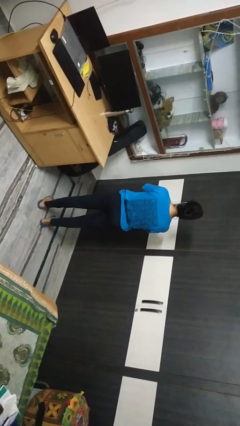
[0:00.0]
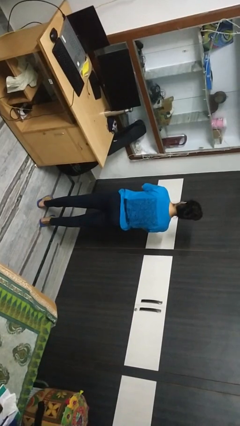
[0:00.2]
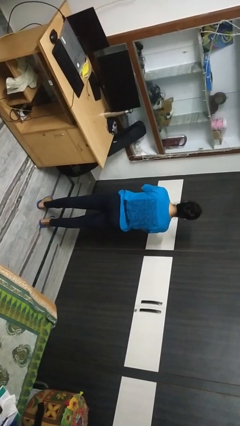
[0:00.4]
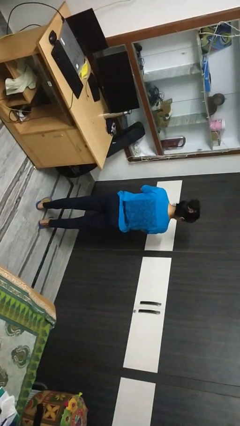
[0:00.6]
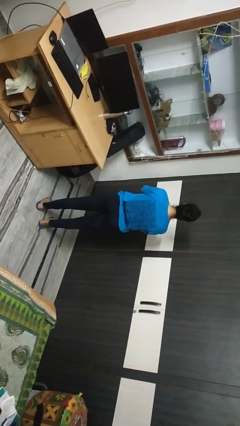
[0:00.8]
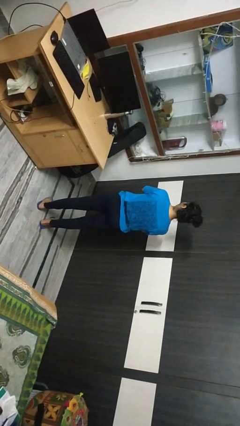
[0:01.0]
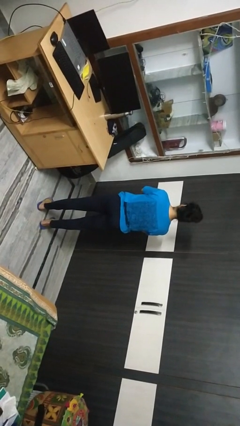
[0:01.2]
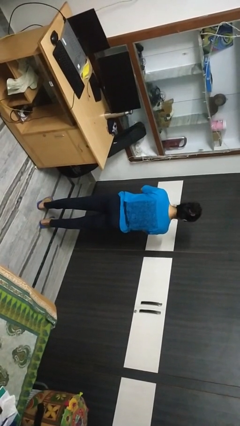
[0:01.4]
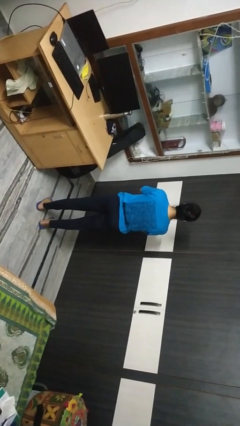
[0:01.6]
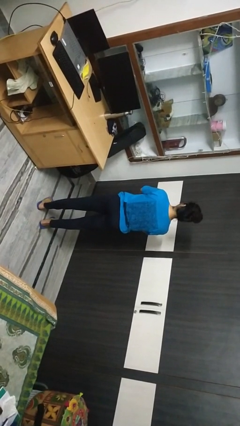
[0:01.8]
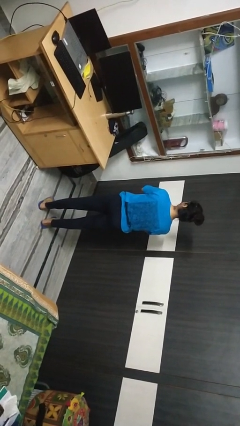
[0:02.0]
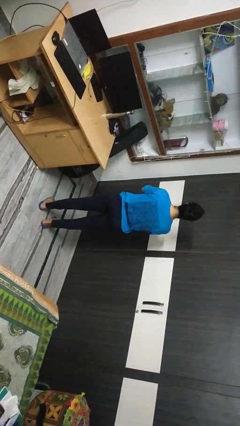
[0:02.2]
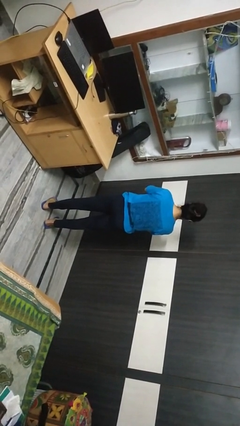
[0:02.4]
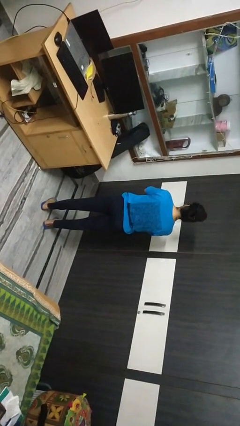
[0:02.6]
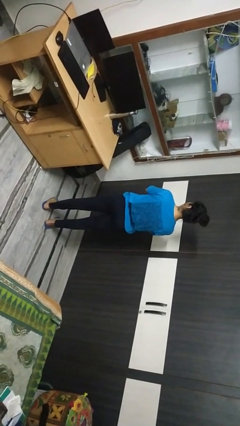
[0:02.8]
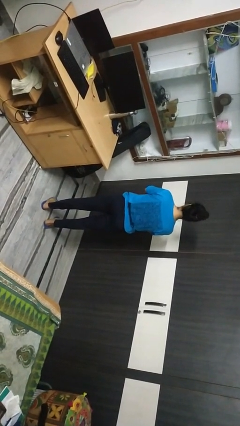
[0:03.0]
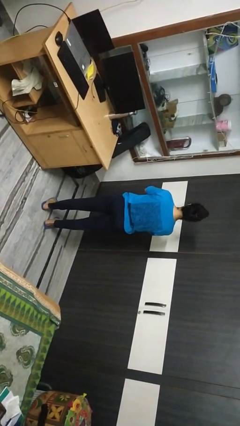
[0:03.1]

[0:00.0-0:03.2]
person shakes head

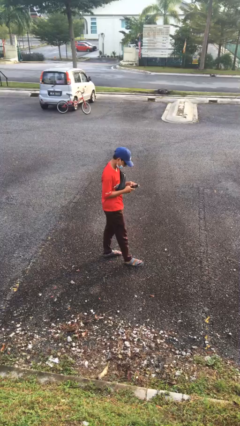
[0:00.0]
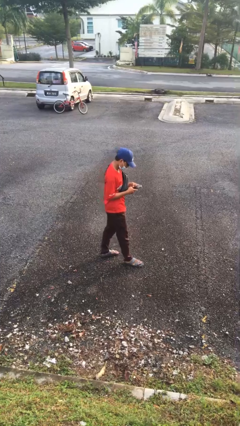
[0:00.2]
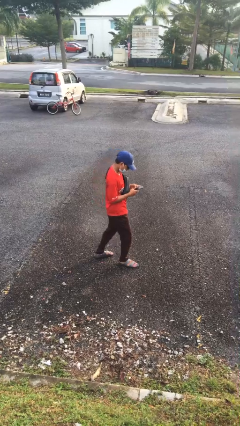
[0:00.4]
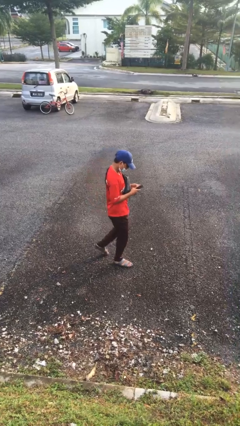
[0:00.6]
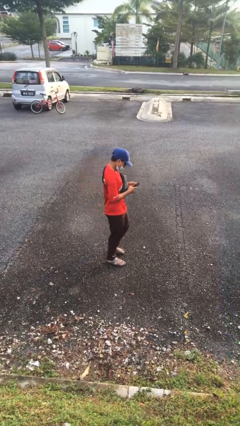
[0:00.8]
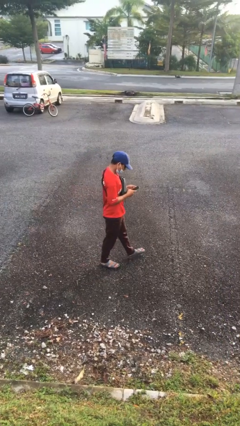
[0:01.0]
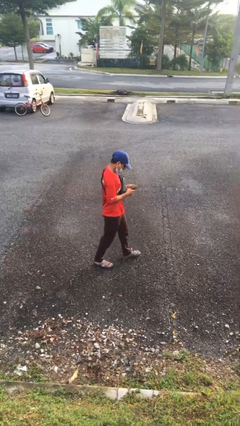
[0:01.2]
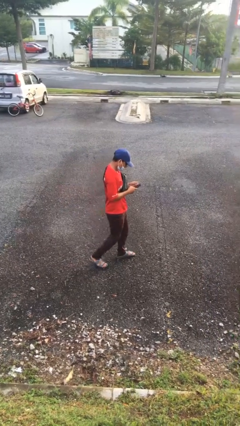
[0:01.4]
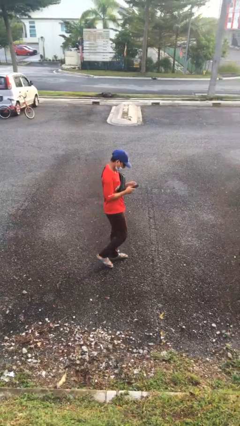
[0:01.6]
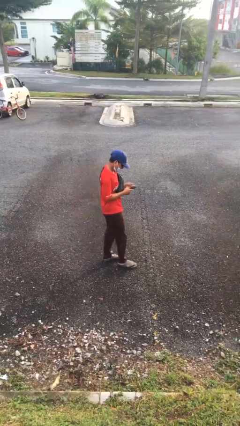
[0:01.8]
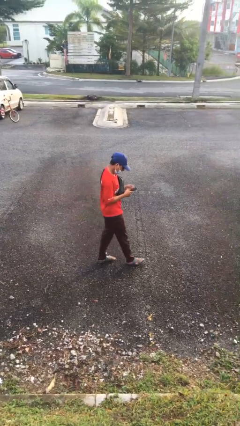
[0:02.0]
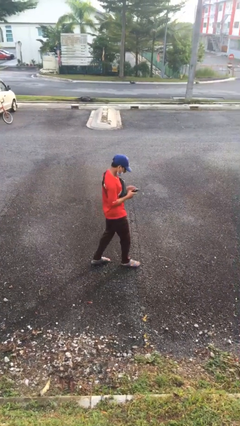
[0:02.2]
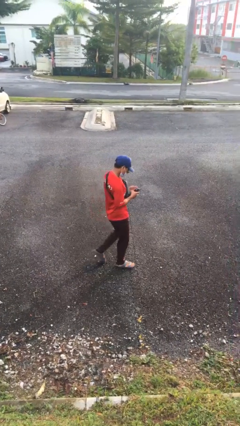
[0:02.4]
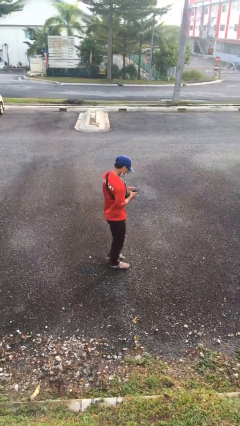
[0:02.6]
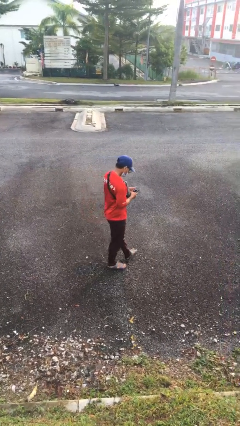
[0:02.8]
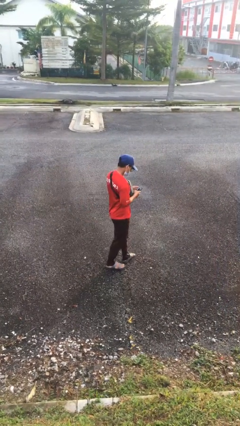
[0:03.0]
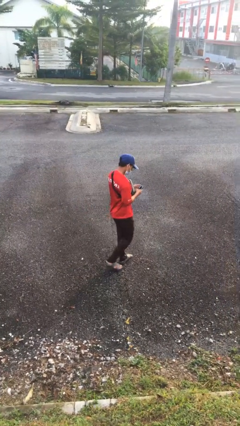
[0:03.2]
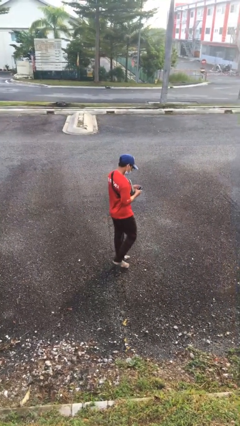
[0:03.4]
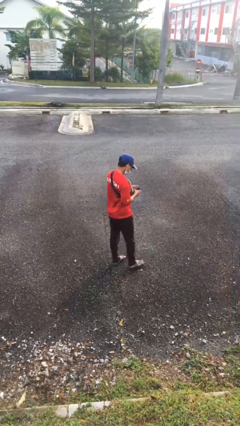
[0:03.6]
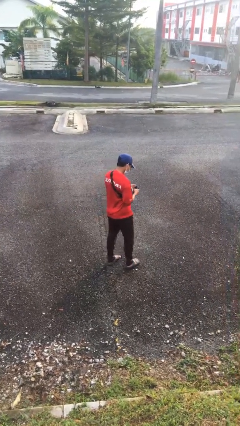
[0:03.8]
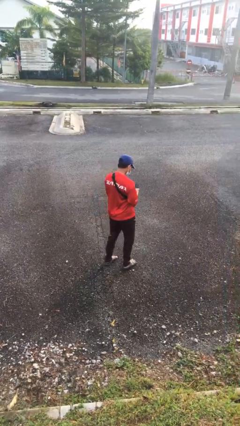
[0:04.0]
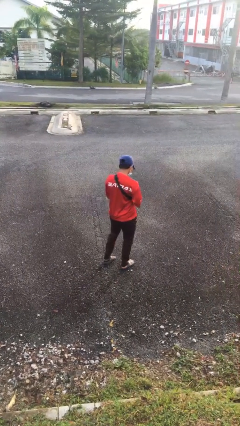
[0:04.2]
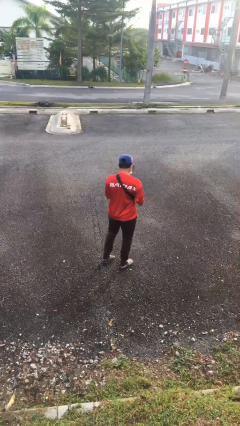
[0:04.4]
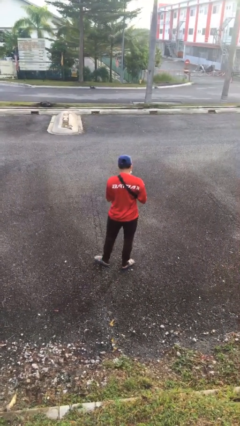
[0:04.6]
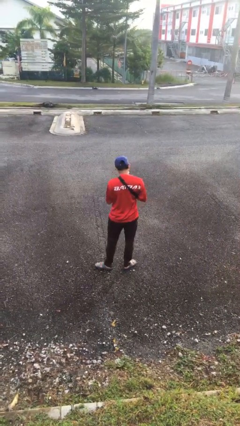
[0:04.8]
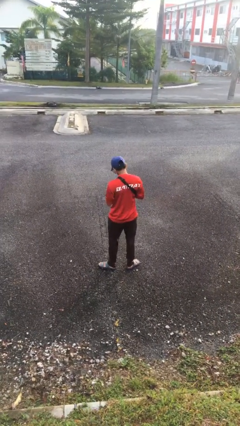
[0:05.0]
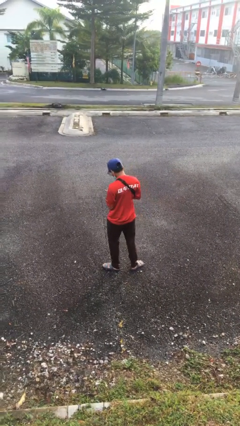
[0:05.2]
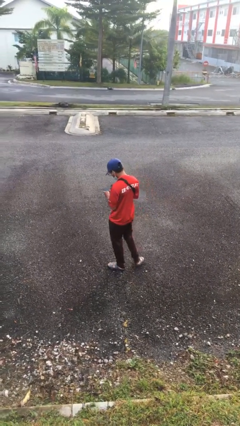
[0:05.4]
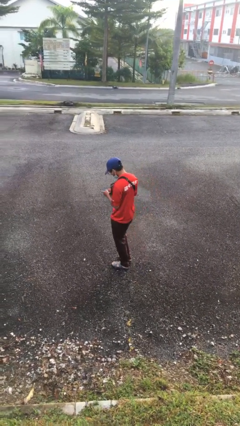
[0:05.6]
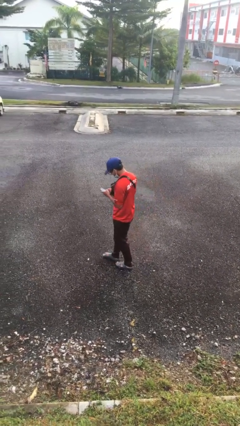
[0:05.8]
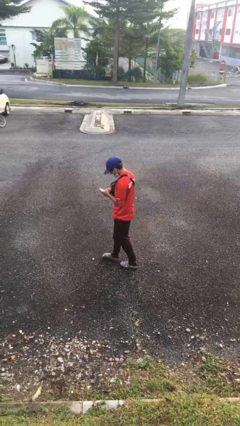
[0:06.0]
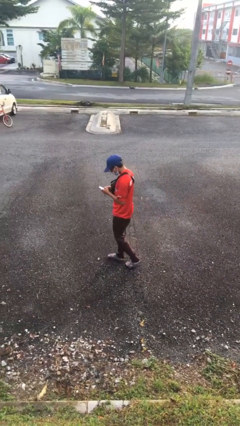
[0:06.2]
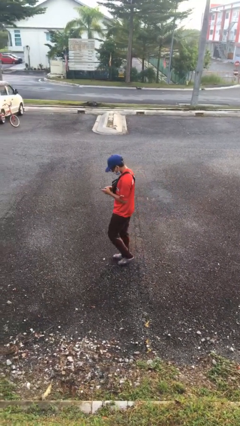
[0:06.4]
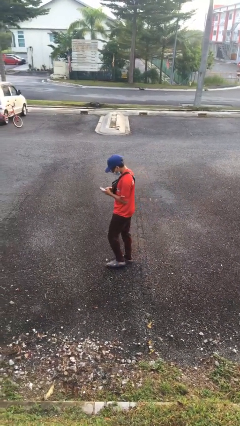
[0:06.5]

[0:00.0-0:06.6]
person texts on phone

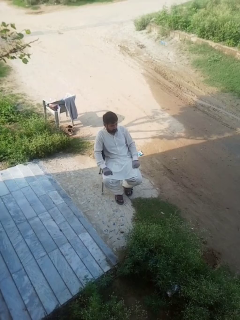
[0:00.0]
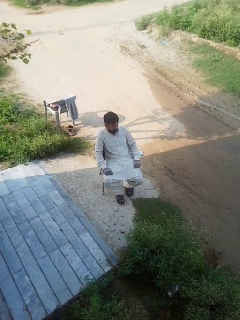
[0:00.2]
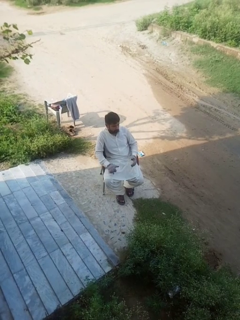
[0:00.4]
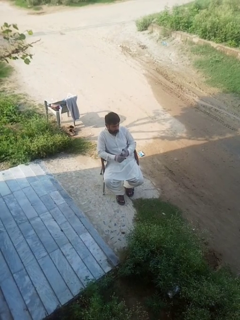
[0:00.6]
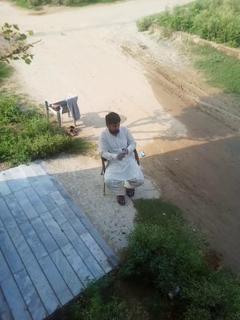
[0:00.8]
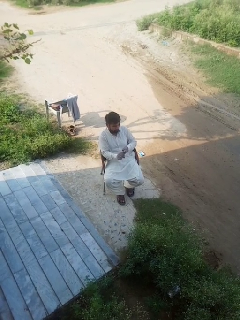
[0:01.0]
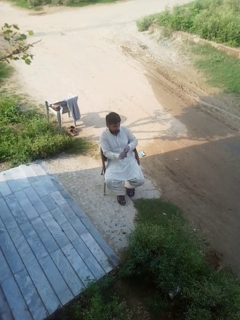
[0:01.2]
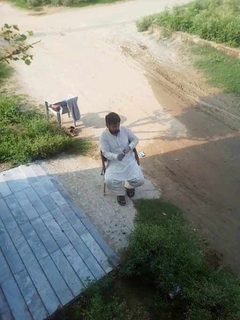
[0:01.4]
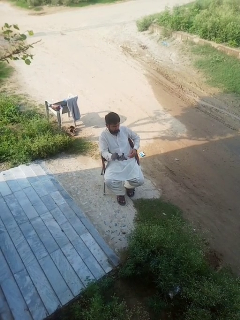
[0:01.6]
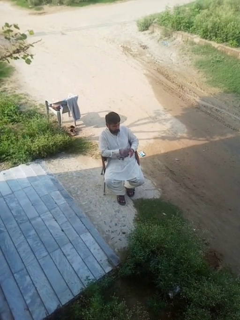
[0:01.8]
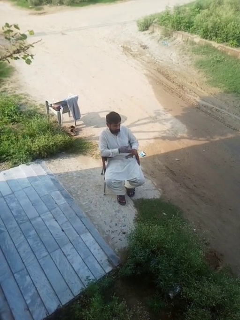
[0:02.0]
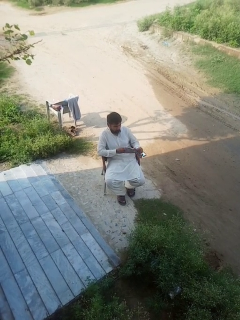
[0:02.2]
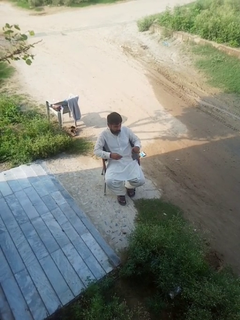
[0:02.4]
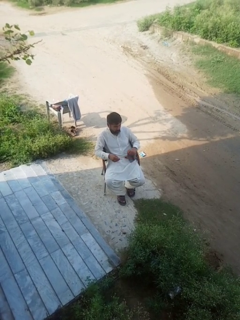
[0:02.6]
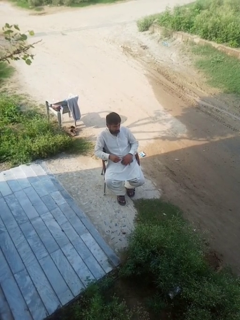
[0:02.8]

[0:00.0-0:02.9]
person takes off gloves

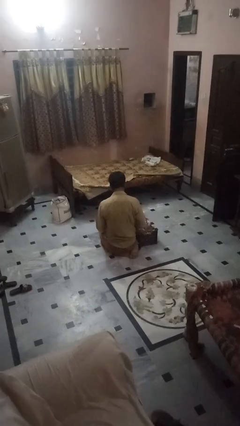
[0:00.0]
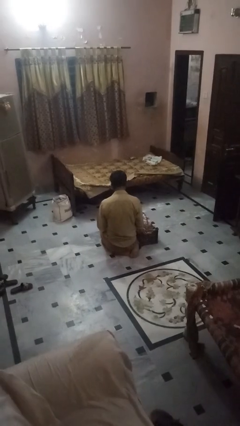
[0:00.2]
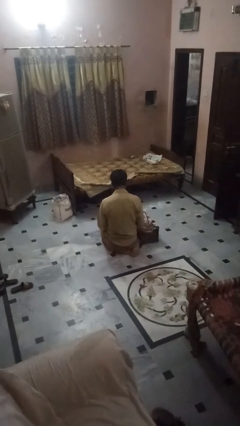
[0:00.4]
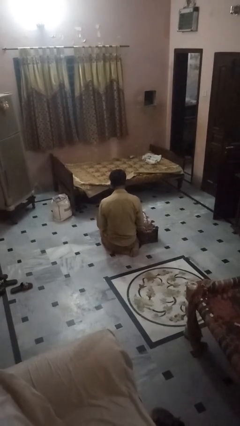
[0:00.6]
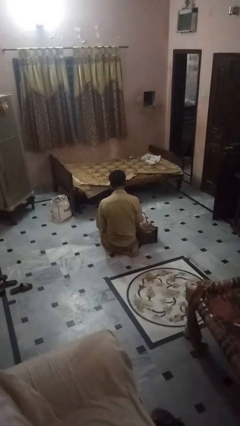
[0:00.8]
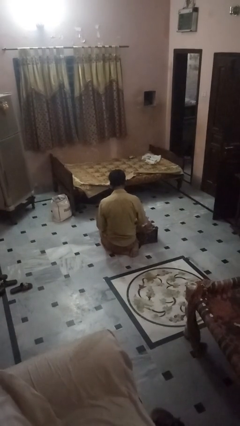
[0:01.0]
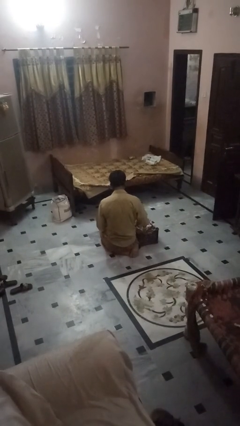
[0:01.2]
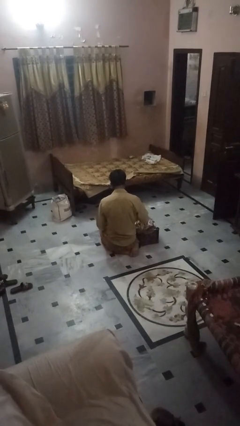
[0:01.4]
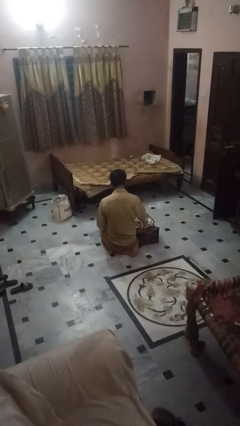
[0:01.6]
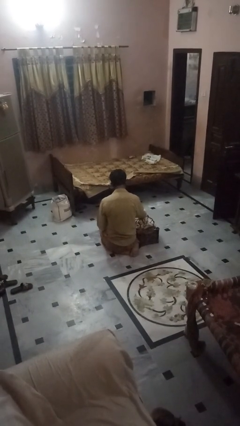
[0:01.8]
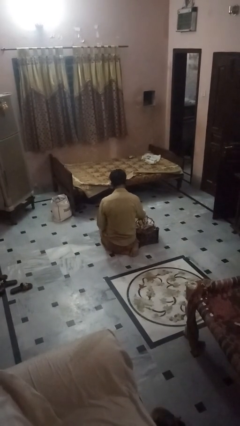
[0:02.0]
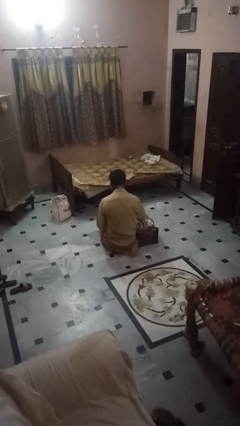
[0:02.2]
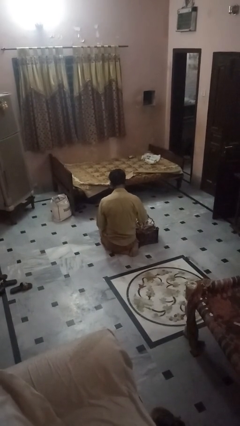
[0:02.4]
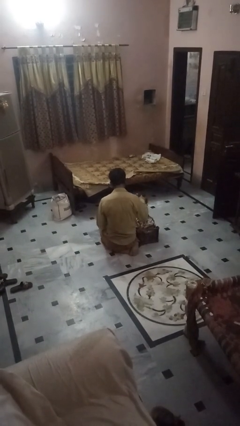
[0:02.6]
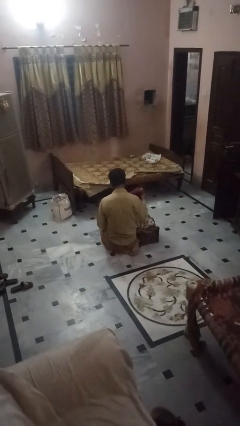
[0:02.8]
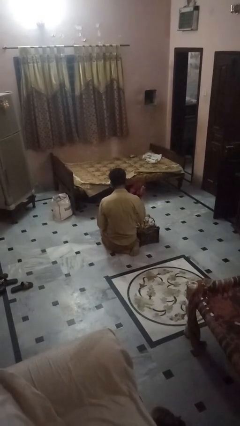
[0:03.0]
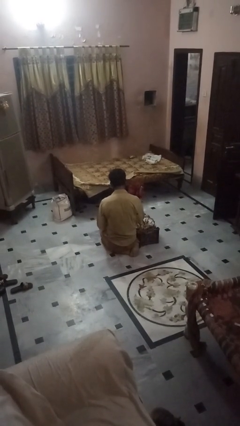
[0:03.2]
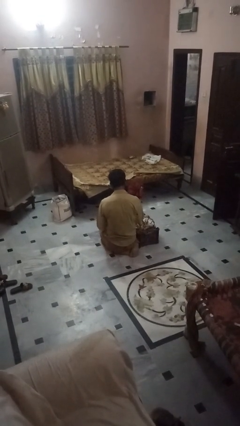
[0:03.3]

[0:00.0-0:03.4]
person takes object from bag

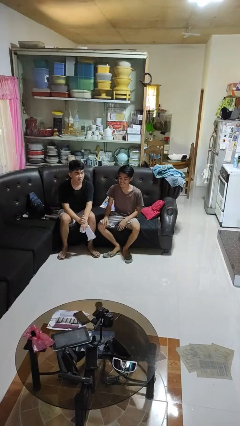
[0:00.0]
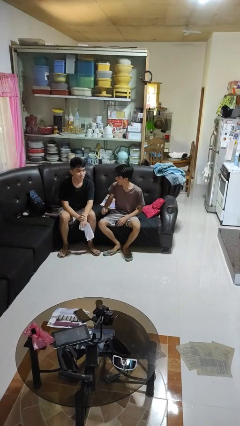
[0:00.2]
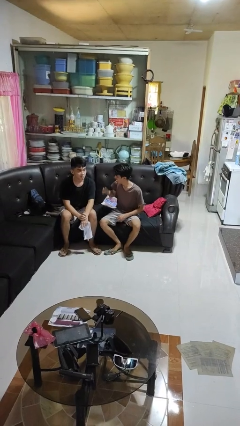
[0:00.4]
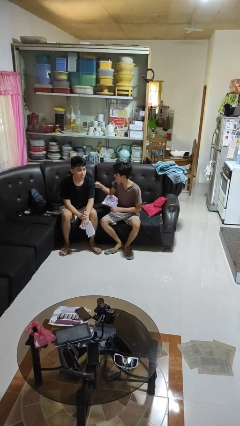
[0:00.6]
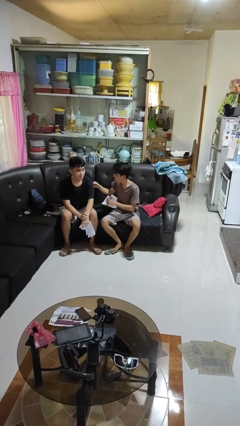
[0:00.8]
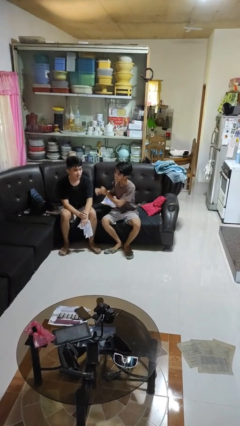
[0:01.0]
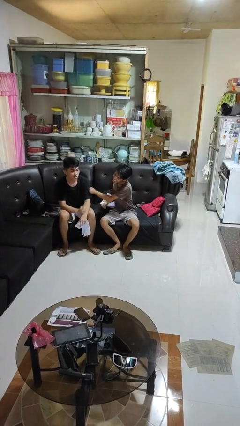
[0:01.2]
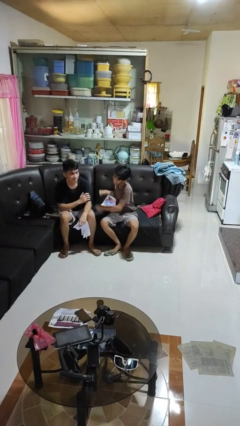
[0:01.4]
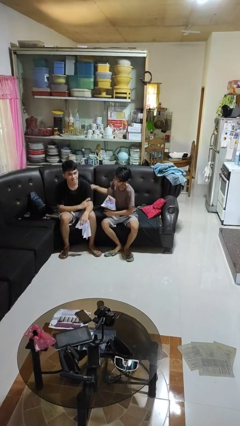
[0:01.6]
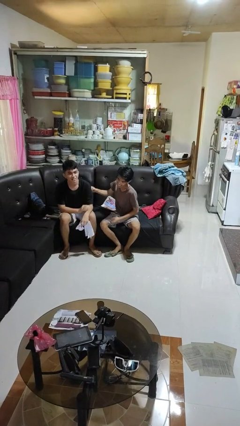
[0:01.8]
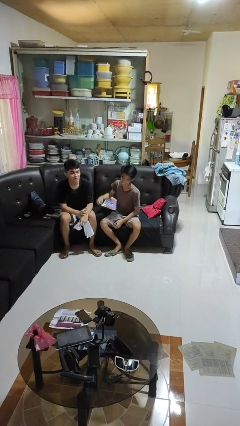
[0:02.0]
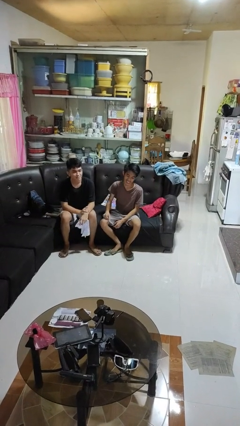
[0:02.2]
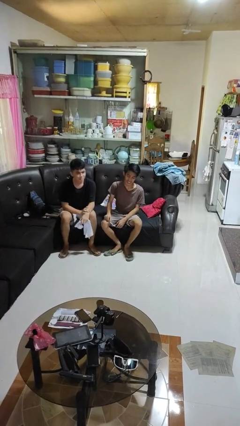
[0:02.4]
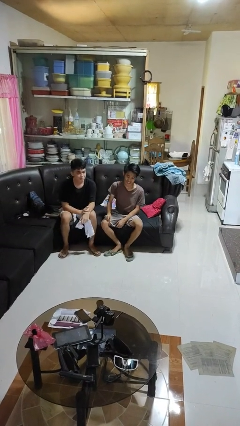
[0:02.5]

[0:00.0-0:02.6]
person pounds shoulders of person
